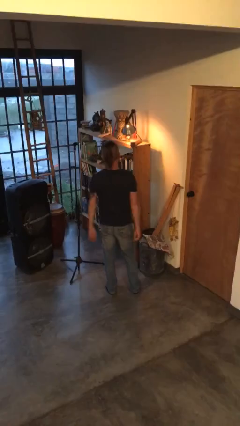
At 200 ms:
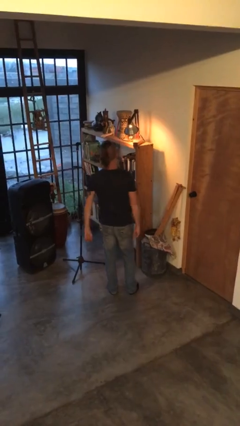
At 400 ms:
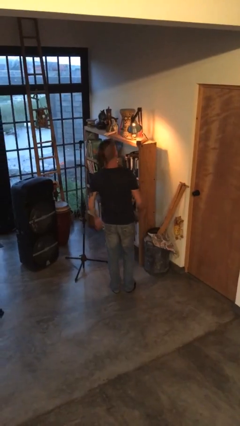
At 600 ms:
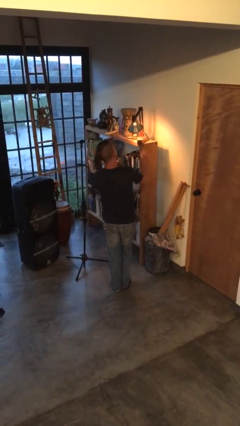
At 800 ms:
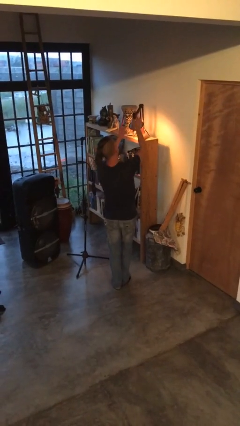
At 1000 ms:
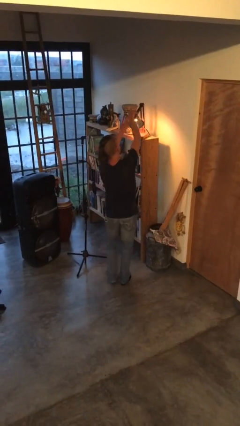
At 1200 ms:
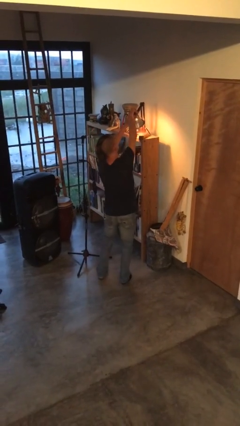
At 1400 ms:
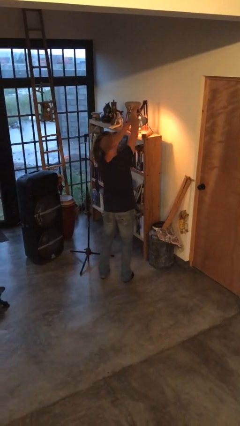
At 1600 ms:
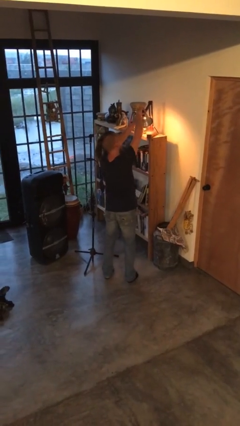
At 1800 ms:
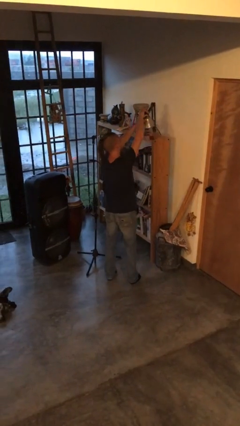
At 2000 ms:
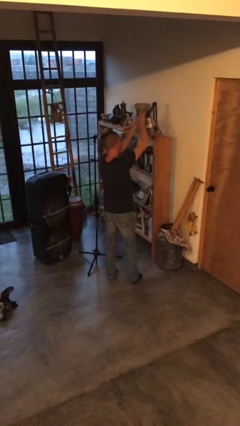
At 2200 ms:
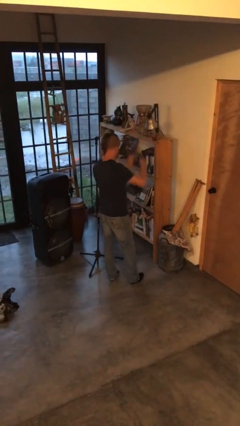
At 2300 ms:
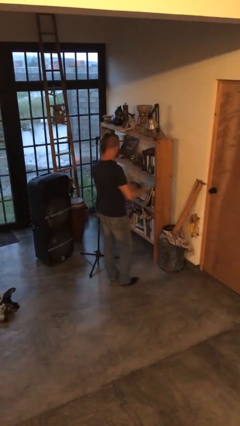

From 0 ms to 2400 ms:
person turns off lamp

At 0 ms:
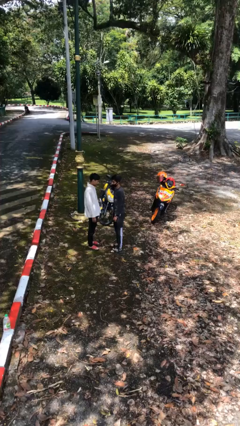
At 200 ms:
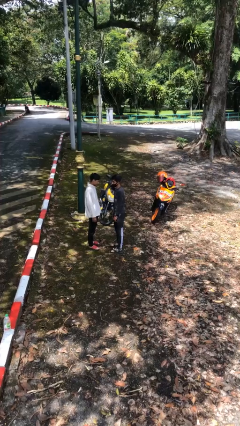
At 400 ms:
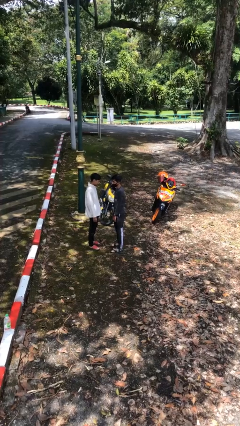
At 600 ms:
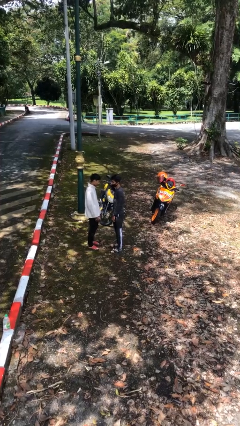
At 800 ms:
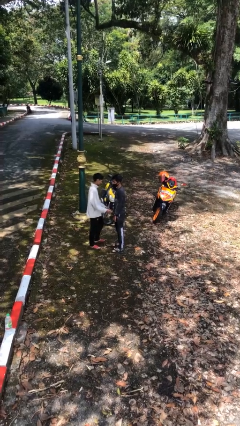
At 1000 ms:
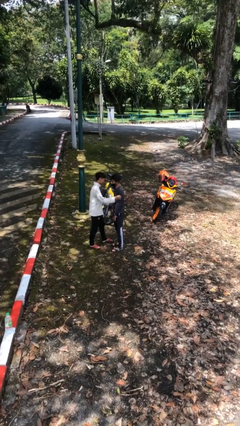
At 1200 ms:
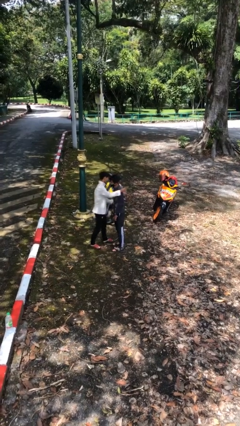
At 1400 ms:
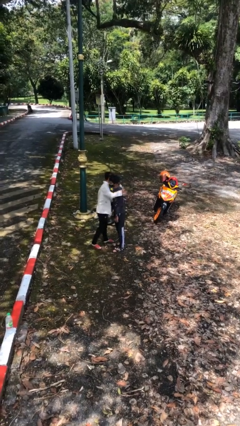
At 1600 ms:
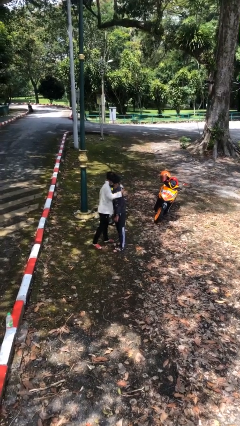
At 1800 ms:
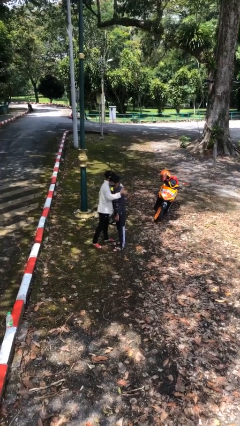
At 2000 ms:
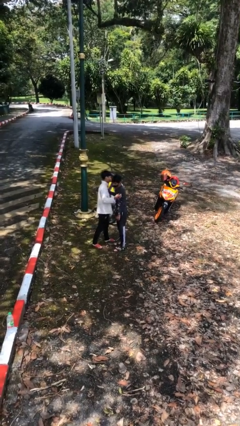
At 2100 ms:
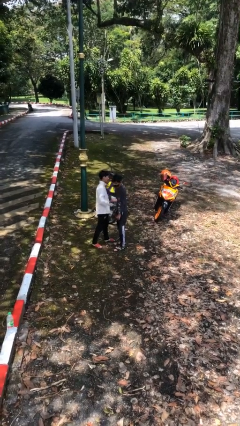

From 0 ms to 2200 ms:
person embraces person

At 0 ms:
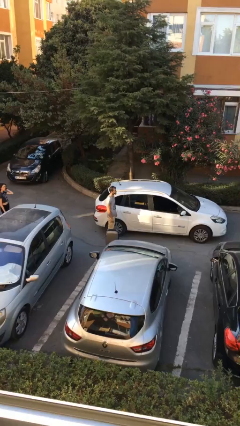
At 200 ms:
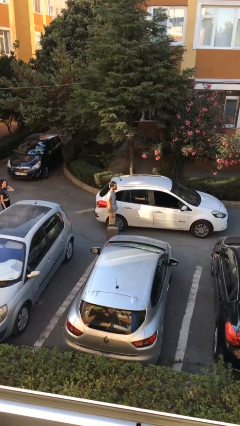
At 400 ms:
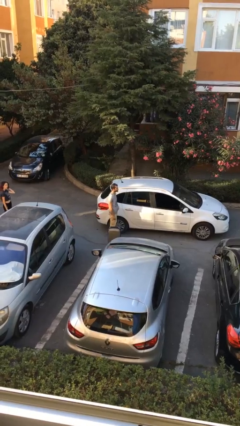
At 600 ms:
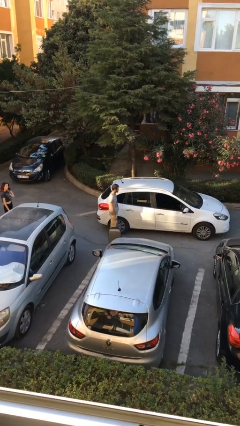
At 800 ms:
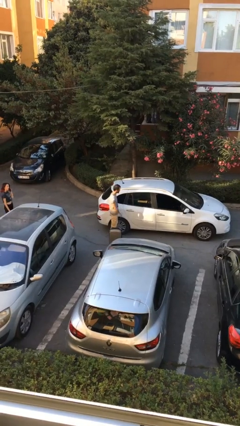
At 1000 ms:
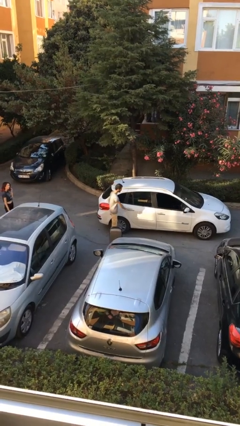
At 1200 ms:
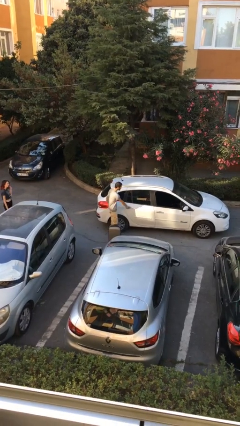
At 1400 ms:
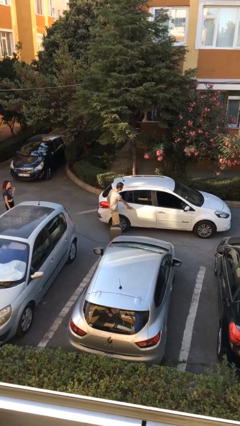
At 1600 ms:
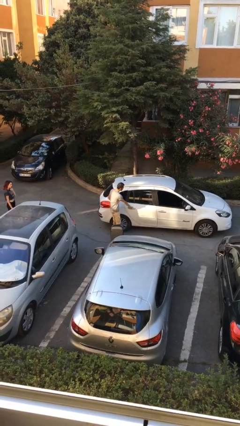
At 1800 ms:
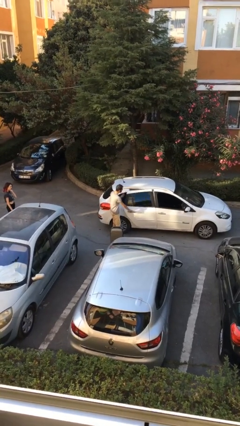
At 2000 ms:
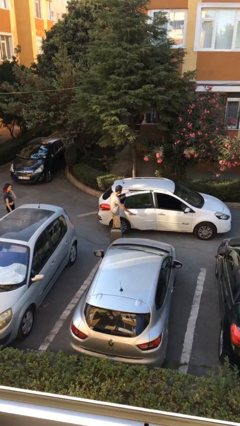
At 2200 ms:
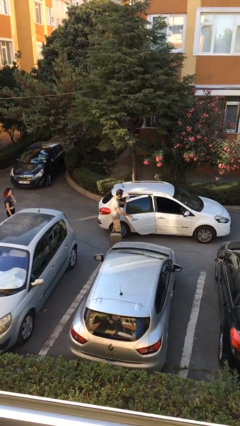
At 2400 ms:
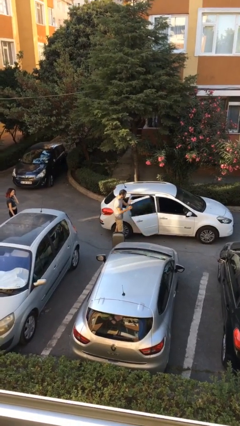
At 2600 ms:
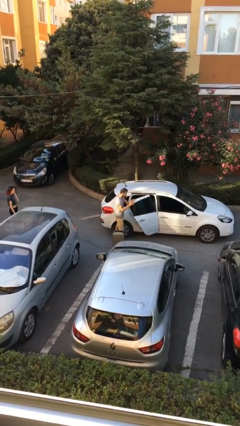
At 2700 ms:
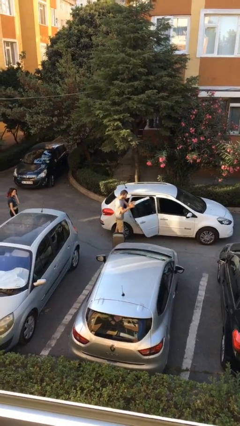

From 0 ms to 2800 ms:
person opens car door

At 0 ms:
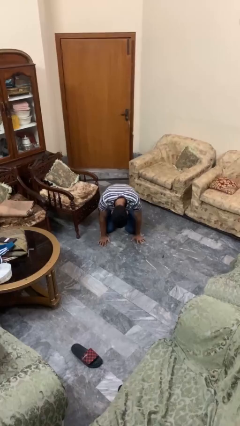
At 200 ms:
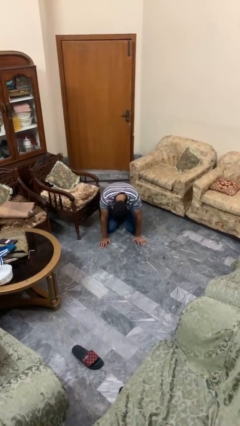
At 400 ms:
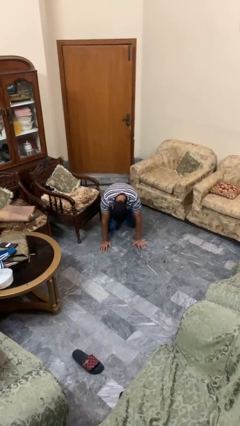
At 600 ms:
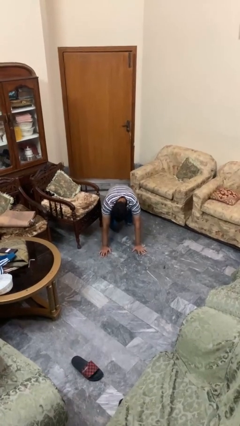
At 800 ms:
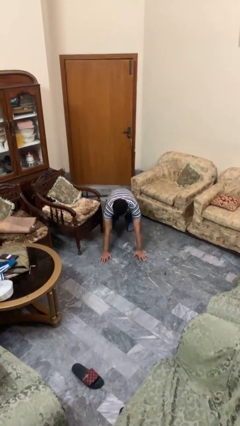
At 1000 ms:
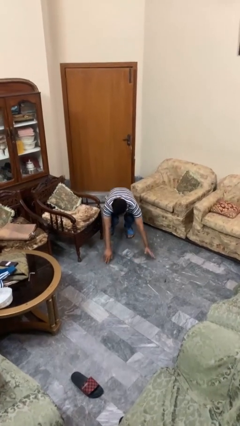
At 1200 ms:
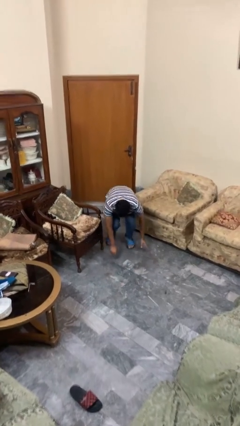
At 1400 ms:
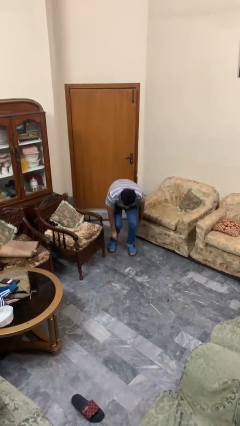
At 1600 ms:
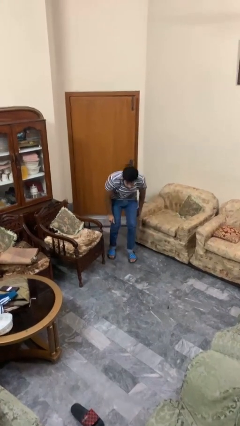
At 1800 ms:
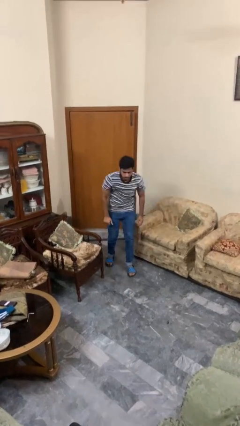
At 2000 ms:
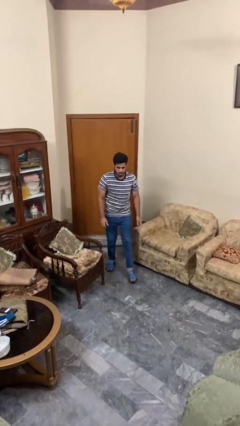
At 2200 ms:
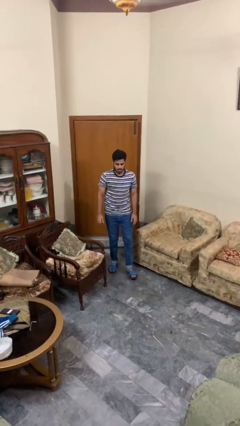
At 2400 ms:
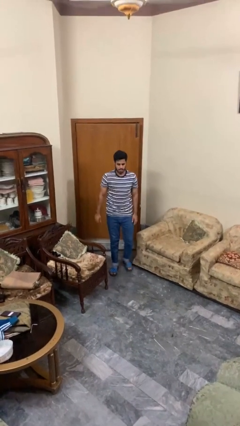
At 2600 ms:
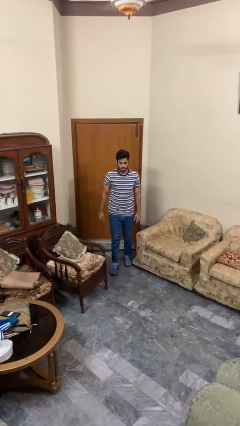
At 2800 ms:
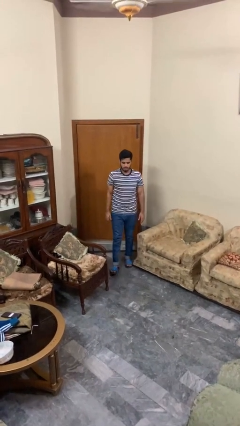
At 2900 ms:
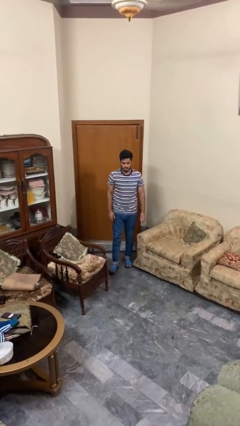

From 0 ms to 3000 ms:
person stands up from floor

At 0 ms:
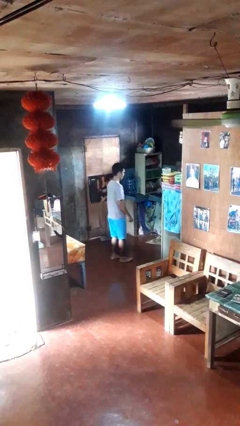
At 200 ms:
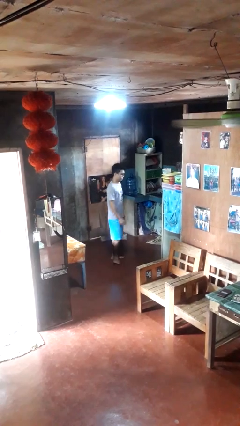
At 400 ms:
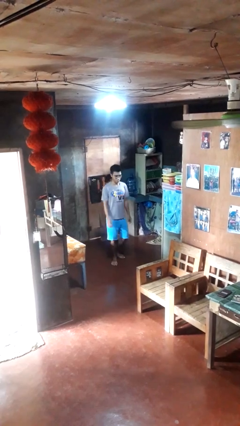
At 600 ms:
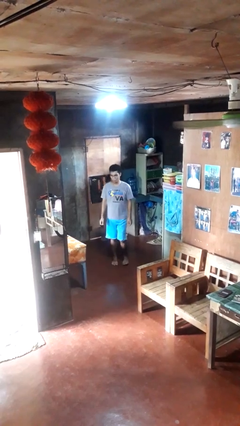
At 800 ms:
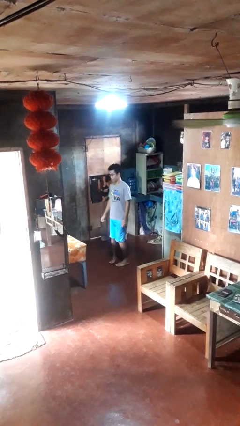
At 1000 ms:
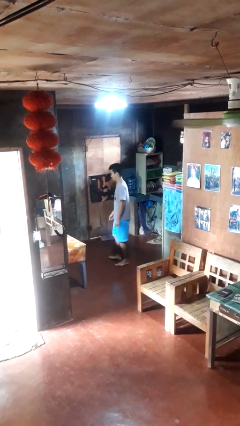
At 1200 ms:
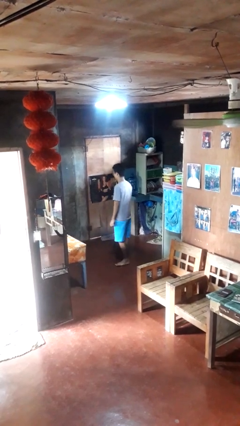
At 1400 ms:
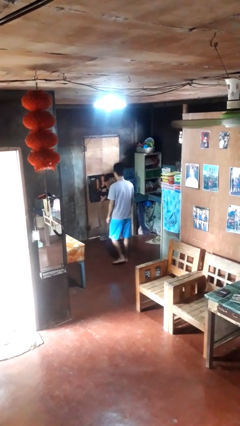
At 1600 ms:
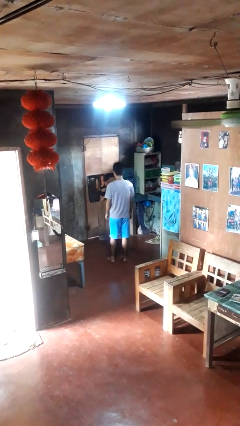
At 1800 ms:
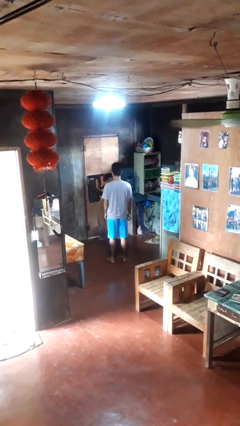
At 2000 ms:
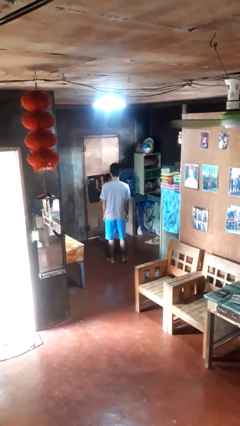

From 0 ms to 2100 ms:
person twirls

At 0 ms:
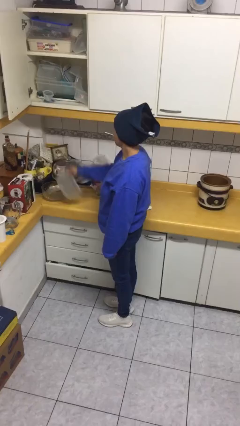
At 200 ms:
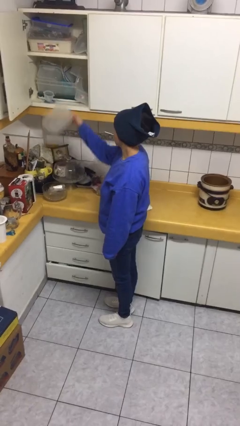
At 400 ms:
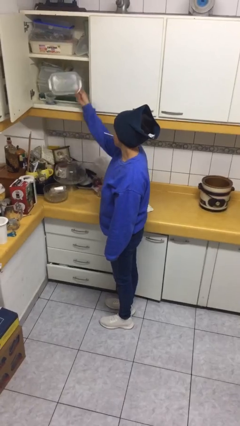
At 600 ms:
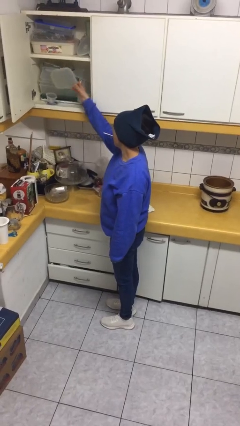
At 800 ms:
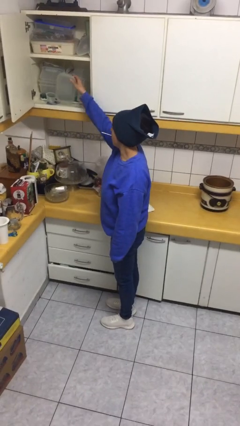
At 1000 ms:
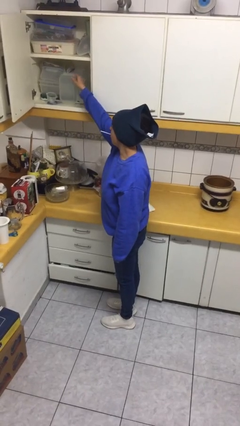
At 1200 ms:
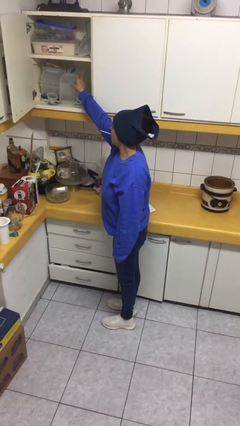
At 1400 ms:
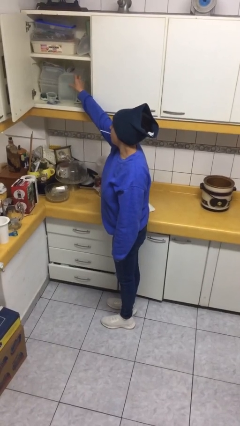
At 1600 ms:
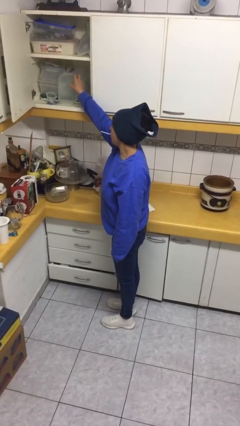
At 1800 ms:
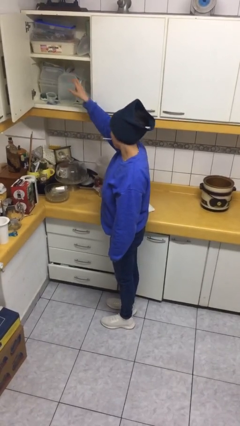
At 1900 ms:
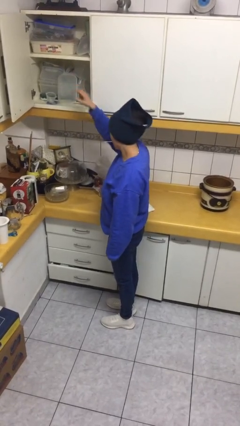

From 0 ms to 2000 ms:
person puts object in cabinet

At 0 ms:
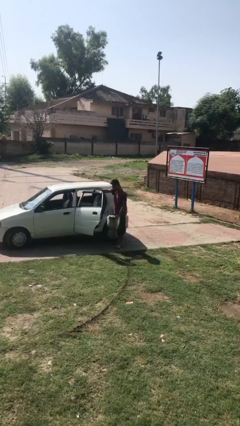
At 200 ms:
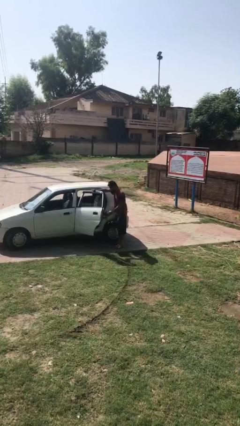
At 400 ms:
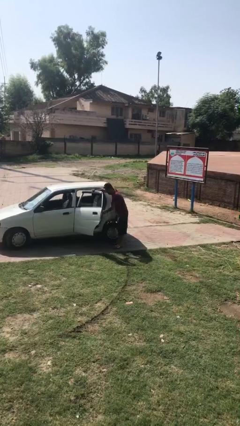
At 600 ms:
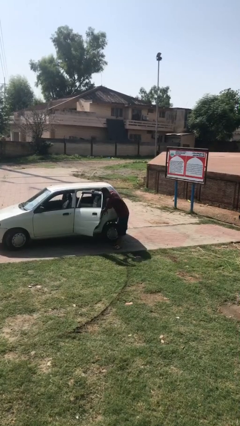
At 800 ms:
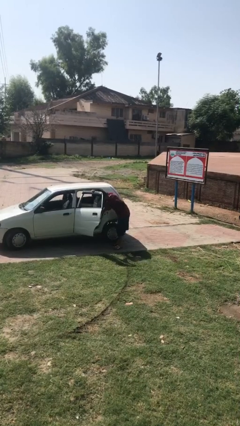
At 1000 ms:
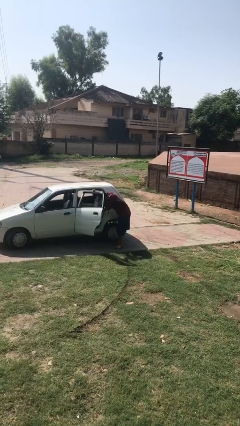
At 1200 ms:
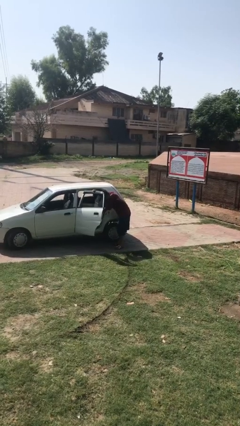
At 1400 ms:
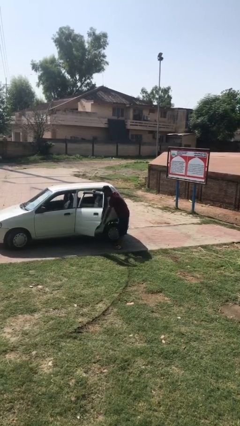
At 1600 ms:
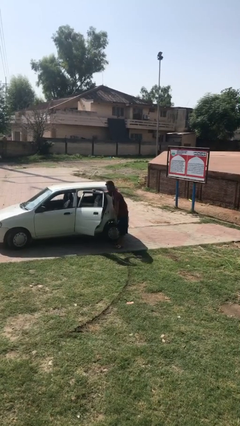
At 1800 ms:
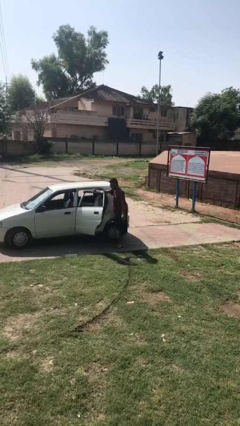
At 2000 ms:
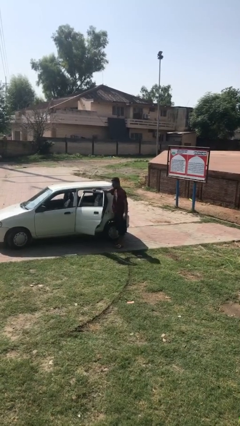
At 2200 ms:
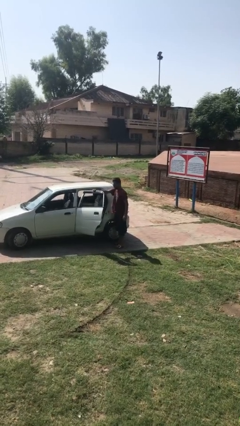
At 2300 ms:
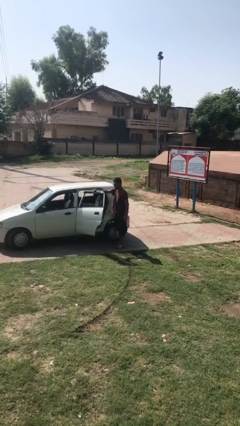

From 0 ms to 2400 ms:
person loads car

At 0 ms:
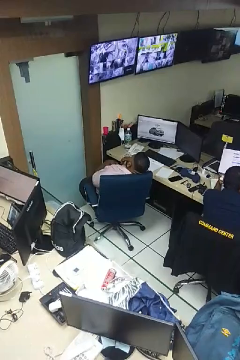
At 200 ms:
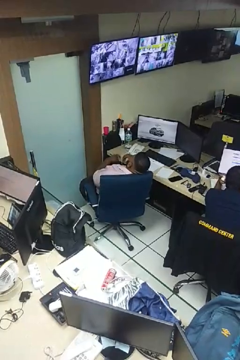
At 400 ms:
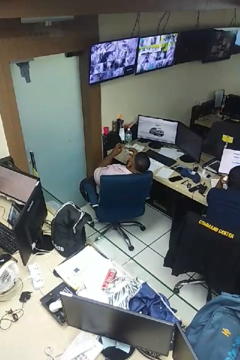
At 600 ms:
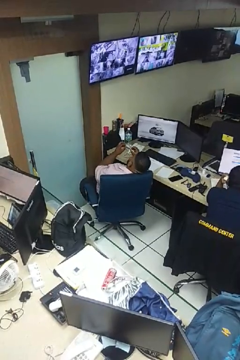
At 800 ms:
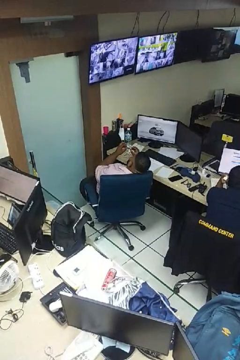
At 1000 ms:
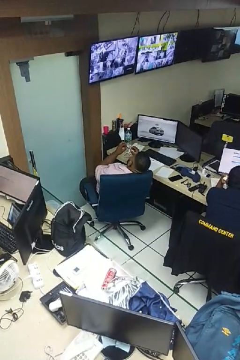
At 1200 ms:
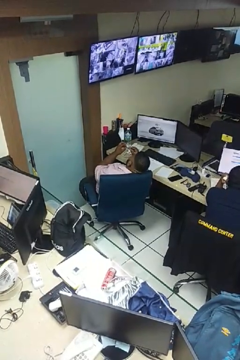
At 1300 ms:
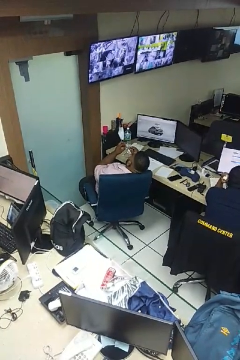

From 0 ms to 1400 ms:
person clips fingernails
